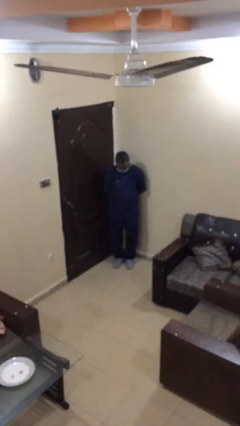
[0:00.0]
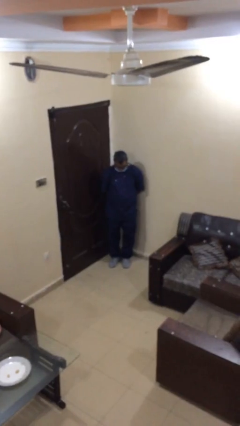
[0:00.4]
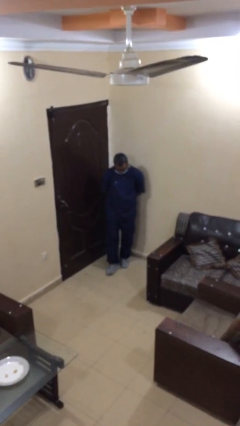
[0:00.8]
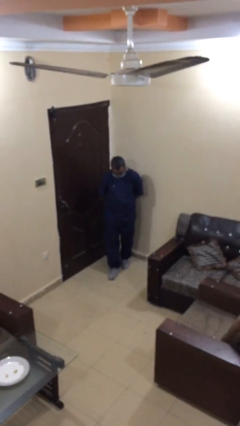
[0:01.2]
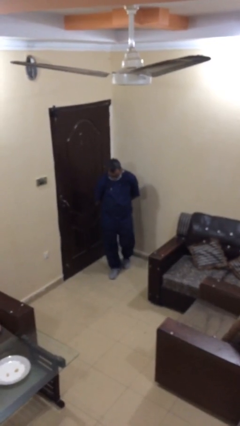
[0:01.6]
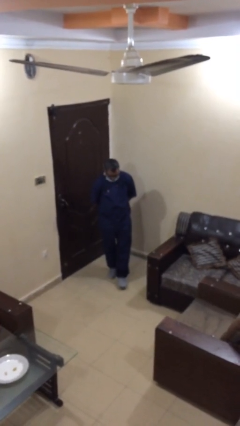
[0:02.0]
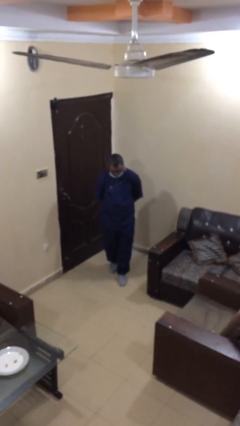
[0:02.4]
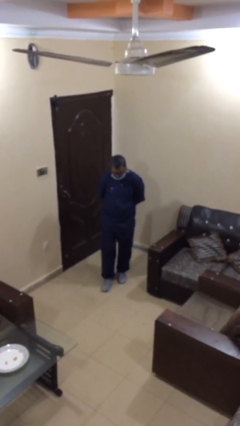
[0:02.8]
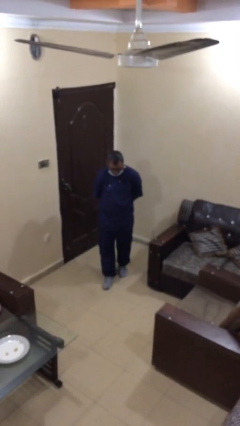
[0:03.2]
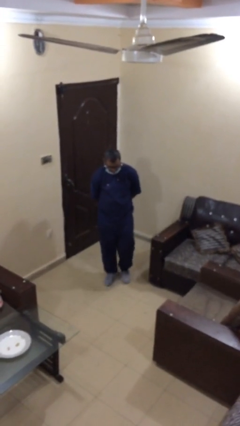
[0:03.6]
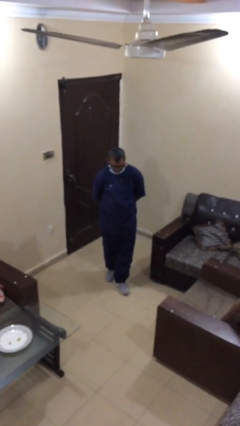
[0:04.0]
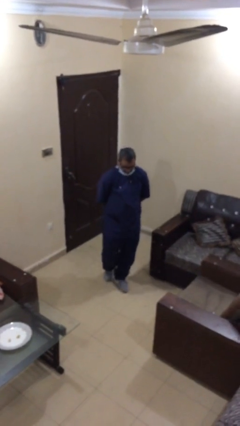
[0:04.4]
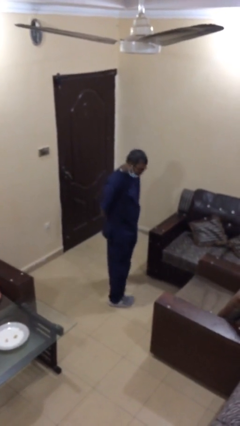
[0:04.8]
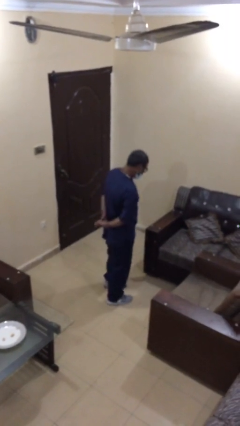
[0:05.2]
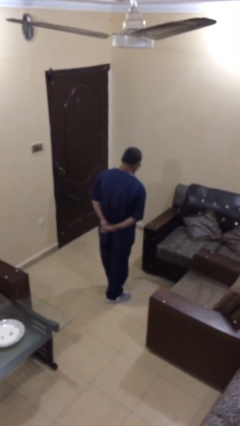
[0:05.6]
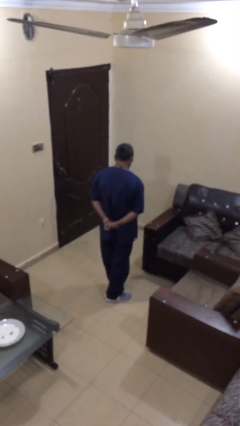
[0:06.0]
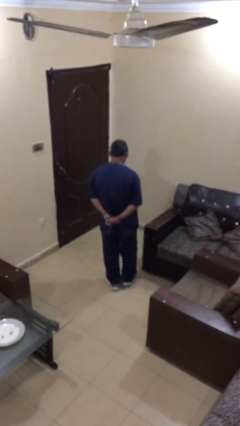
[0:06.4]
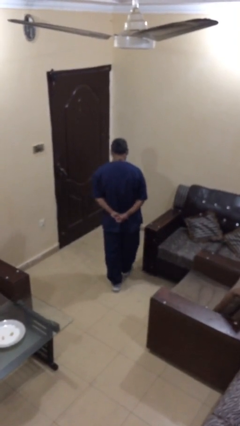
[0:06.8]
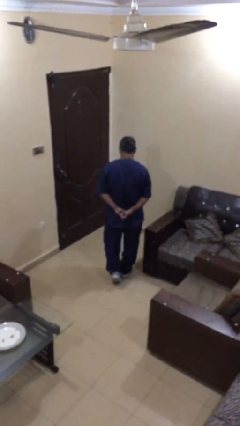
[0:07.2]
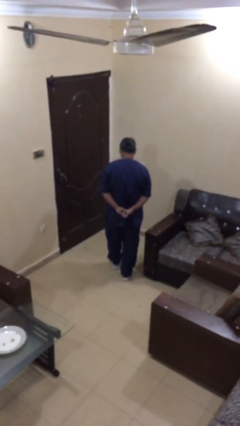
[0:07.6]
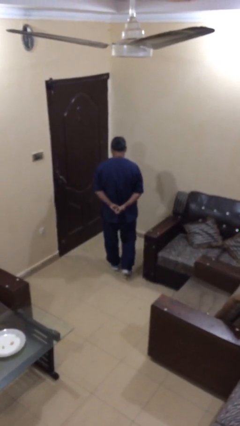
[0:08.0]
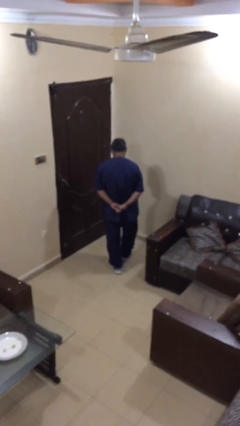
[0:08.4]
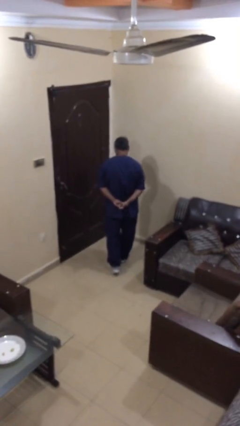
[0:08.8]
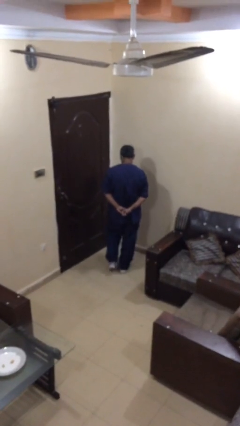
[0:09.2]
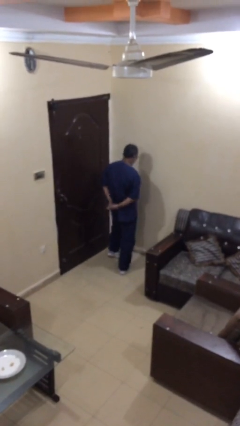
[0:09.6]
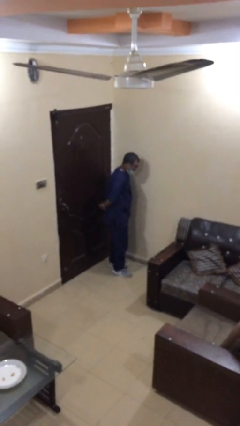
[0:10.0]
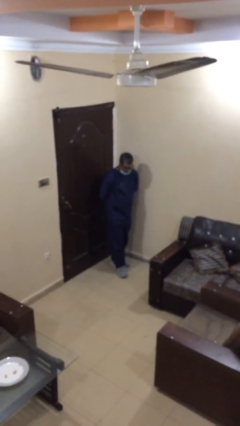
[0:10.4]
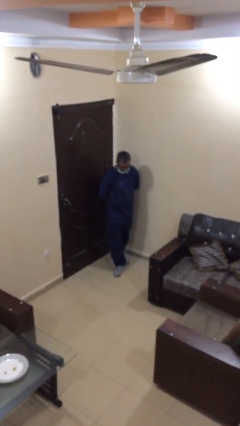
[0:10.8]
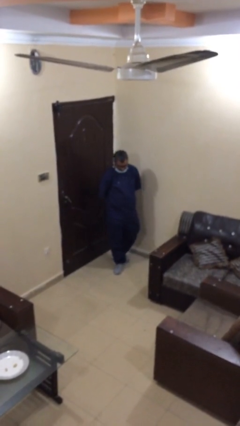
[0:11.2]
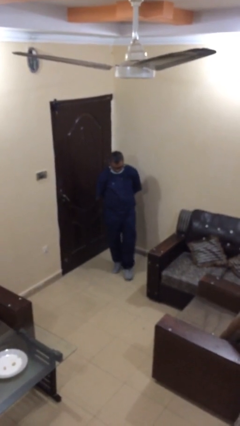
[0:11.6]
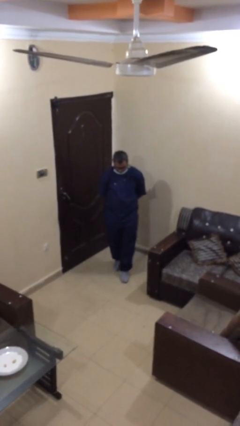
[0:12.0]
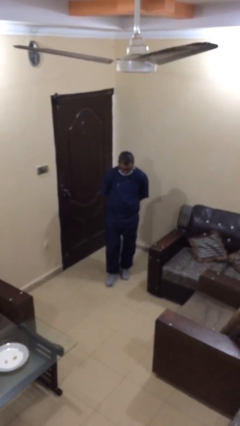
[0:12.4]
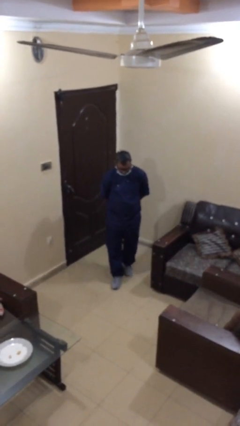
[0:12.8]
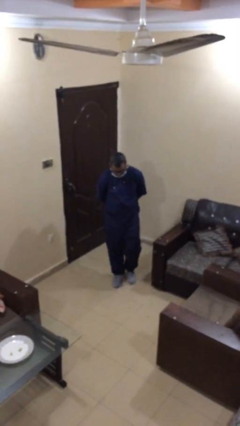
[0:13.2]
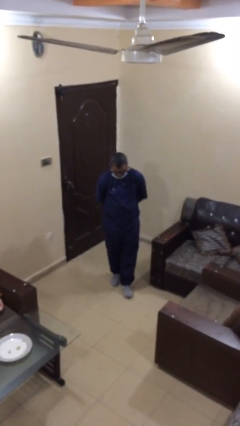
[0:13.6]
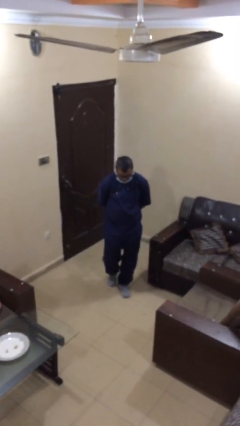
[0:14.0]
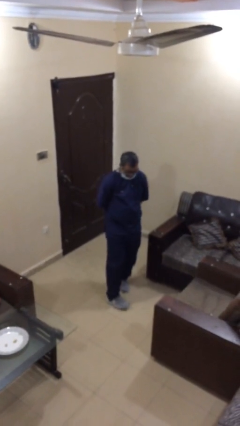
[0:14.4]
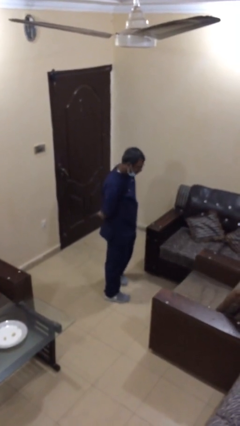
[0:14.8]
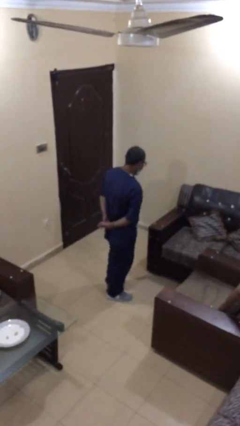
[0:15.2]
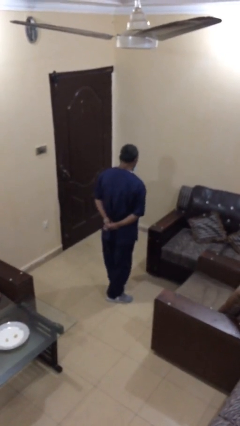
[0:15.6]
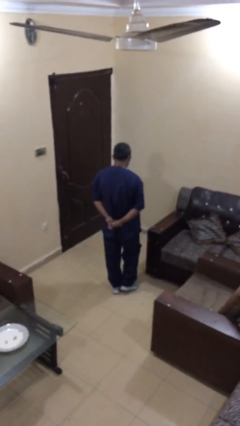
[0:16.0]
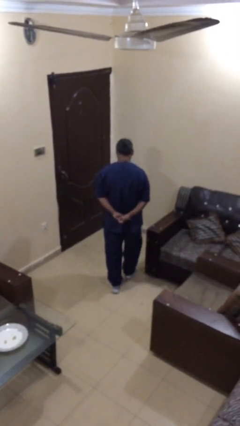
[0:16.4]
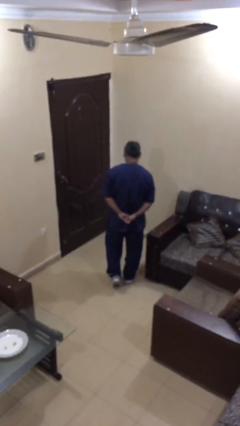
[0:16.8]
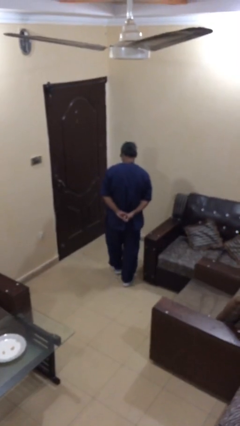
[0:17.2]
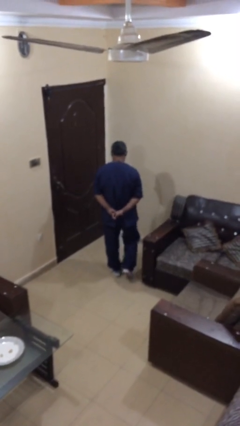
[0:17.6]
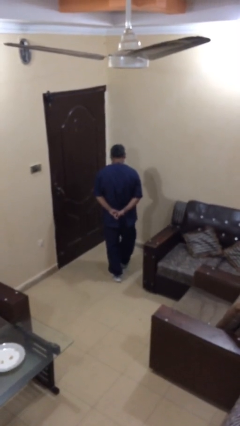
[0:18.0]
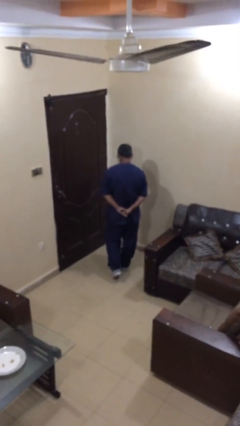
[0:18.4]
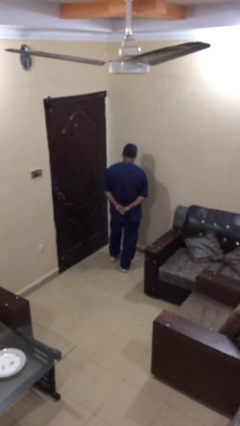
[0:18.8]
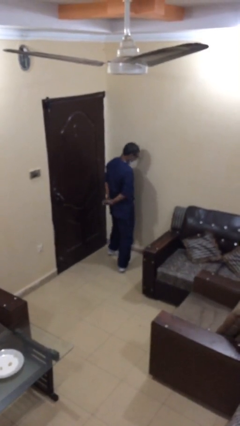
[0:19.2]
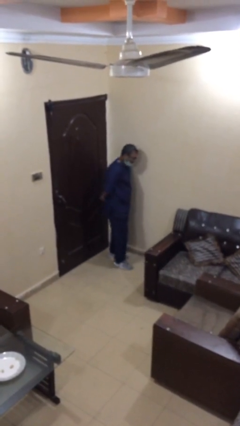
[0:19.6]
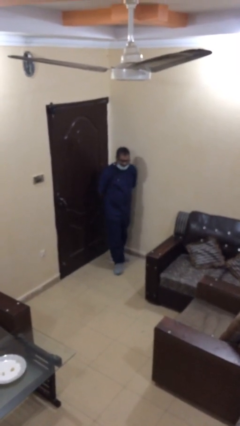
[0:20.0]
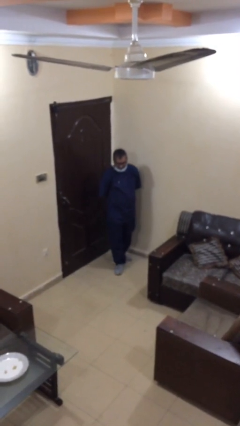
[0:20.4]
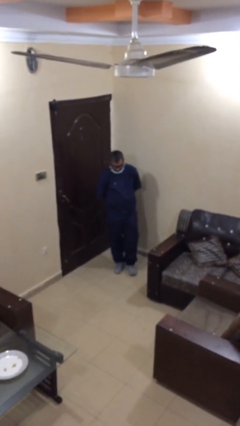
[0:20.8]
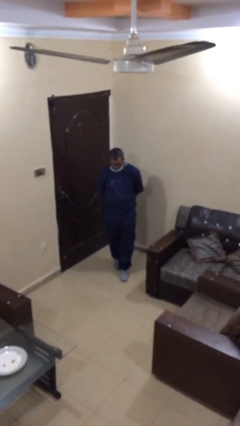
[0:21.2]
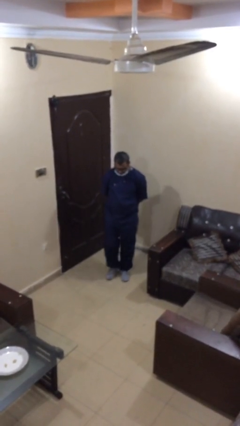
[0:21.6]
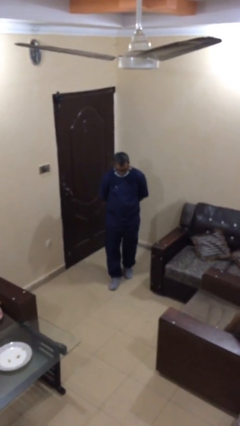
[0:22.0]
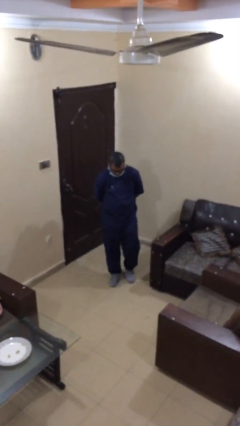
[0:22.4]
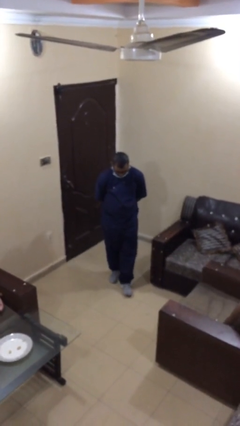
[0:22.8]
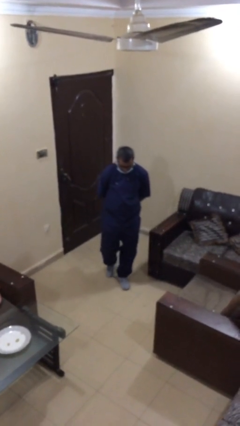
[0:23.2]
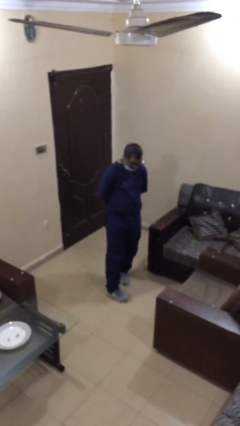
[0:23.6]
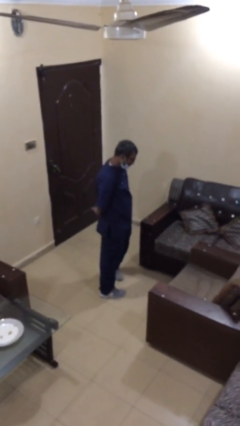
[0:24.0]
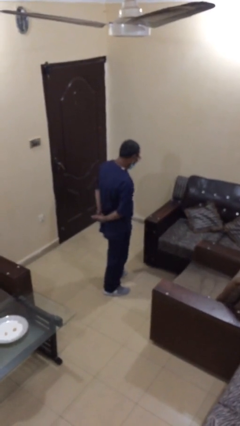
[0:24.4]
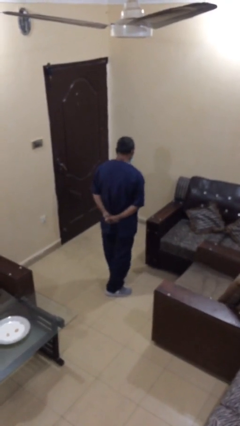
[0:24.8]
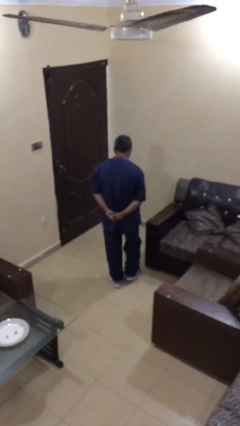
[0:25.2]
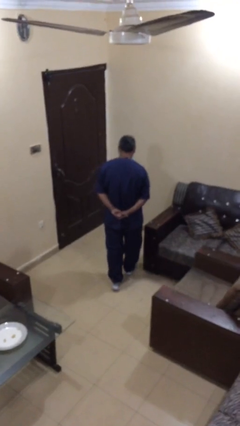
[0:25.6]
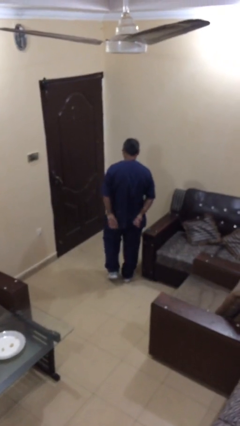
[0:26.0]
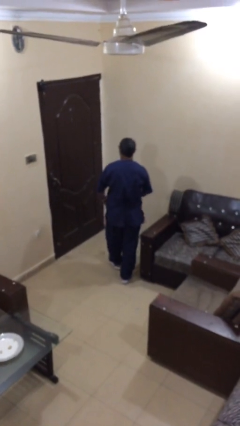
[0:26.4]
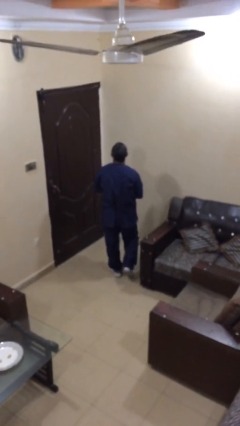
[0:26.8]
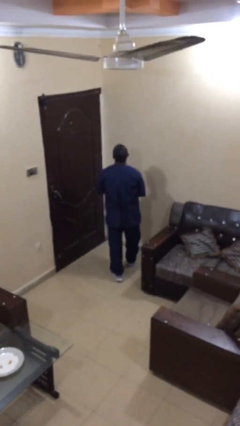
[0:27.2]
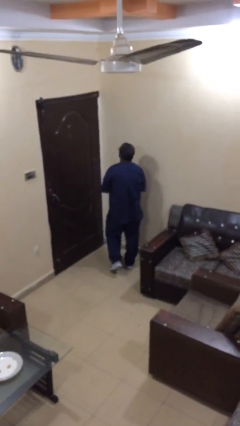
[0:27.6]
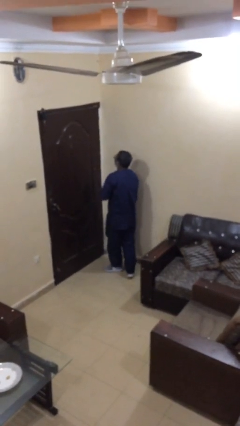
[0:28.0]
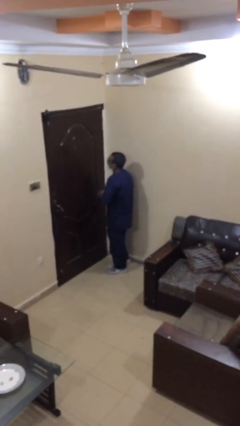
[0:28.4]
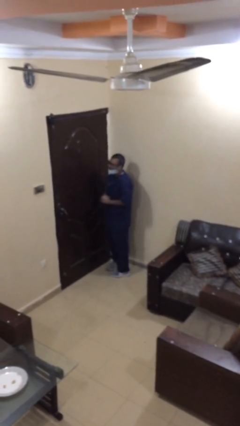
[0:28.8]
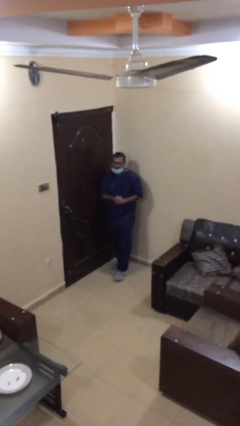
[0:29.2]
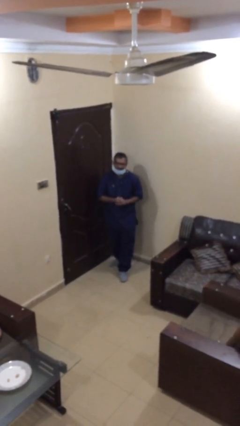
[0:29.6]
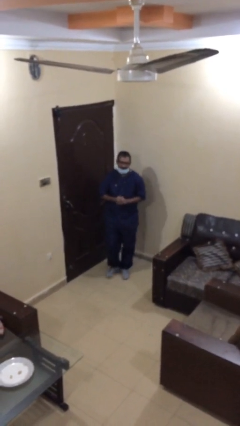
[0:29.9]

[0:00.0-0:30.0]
person walks

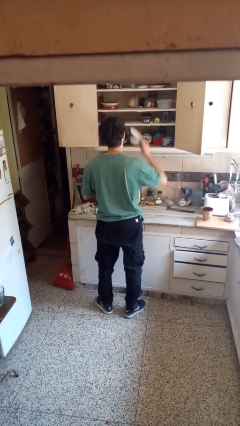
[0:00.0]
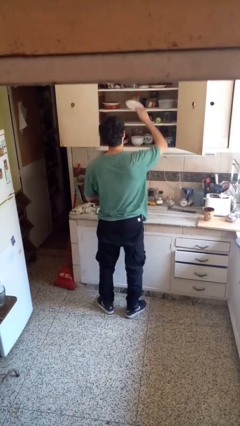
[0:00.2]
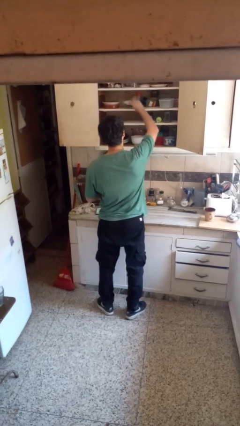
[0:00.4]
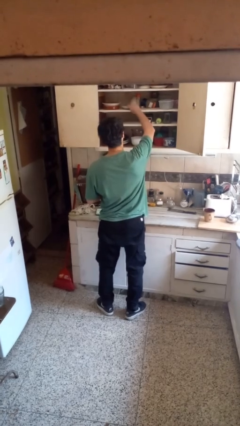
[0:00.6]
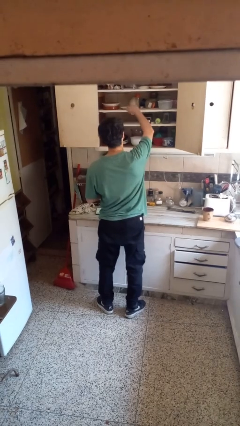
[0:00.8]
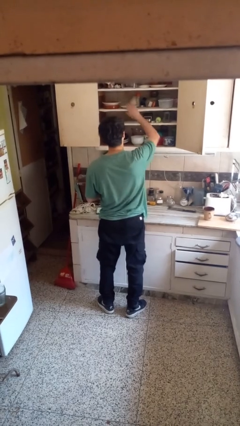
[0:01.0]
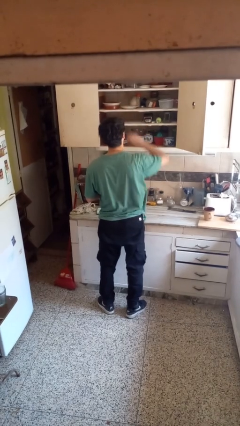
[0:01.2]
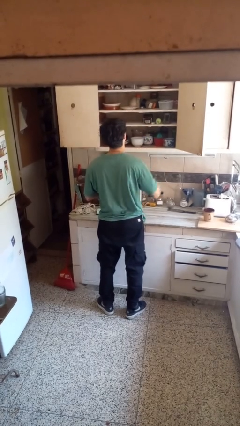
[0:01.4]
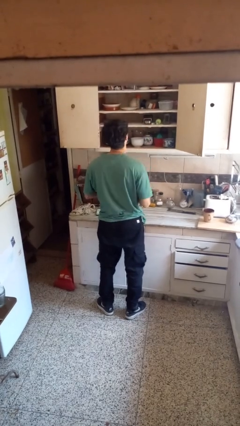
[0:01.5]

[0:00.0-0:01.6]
person puts object in cabinet

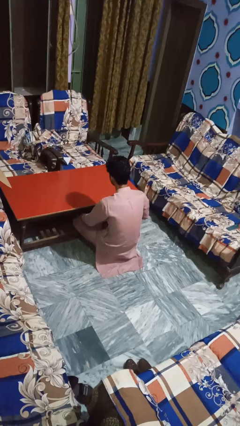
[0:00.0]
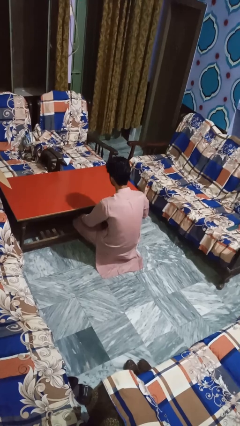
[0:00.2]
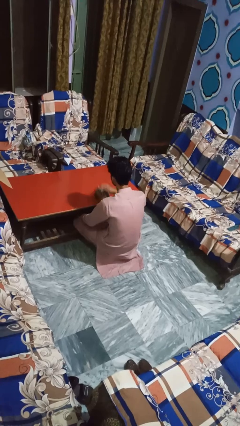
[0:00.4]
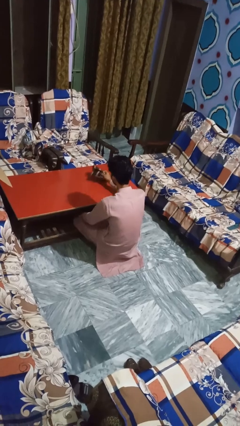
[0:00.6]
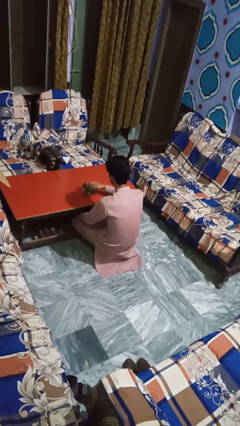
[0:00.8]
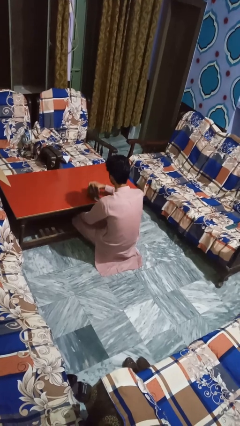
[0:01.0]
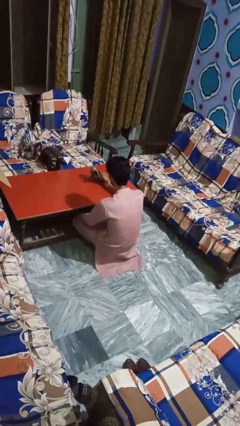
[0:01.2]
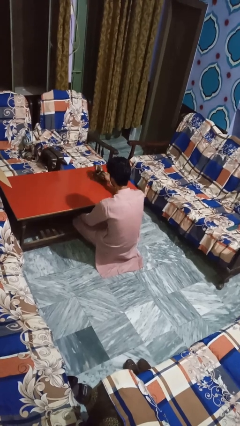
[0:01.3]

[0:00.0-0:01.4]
person cleans table with rag
